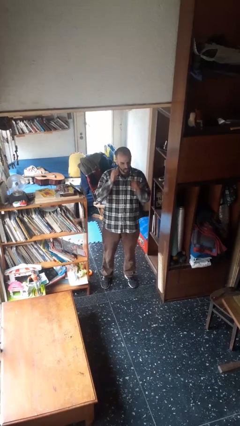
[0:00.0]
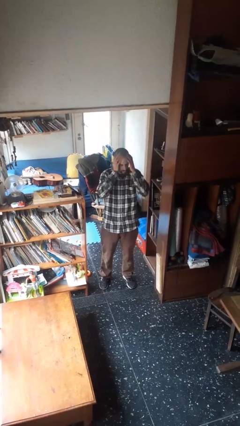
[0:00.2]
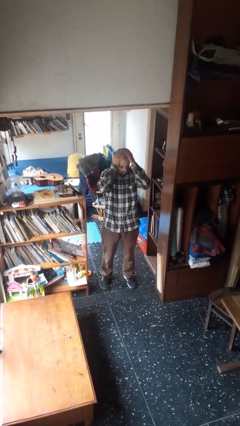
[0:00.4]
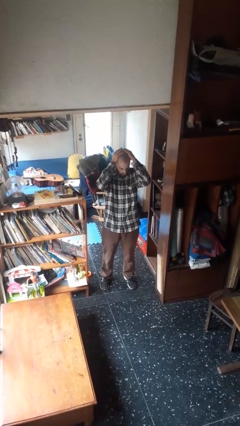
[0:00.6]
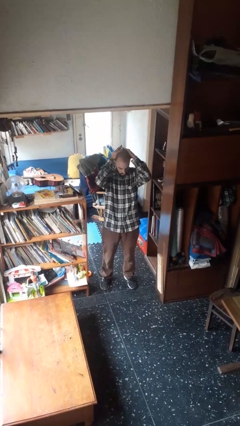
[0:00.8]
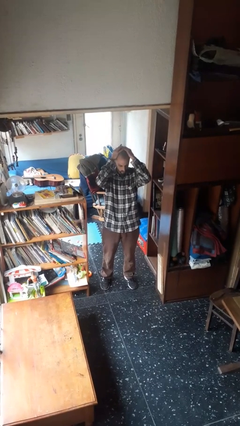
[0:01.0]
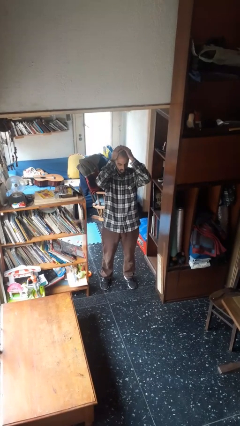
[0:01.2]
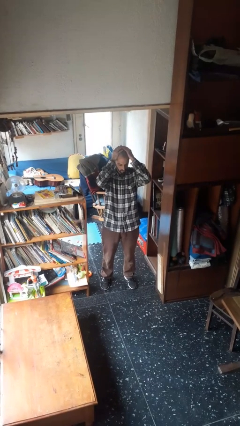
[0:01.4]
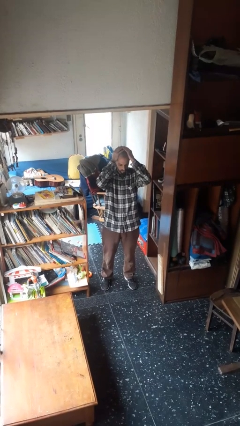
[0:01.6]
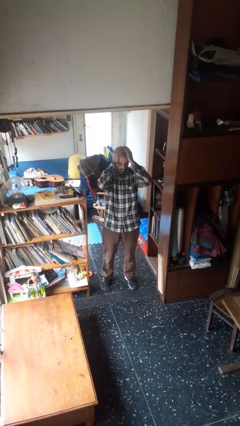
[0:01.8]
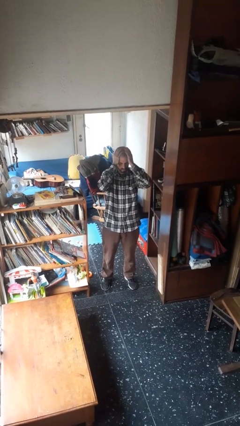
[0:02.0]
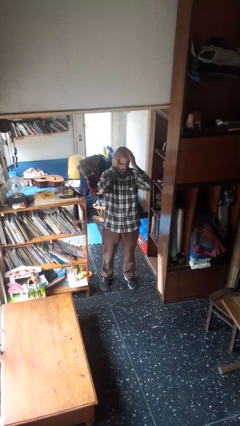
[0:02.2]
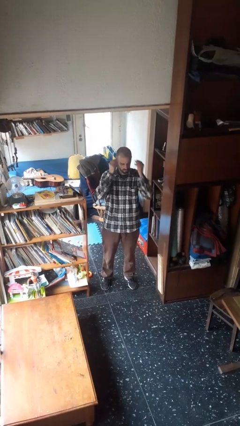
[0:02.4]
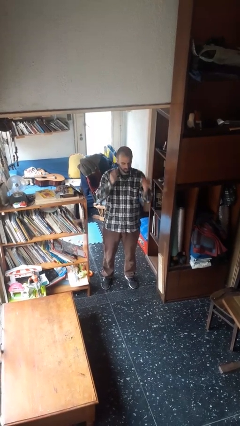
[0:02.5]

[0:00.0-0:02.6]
person pats head

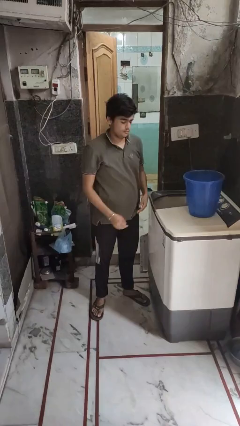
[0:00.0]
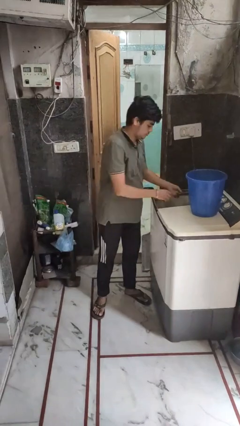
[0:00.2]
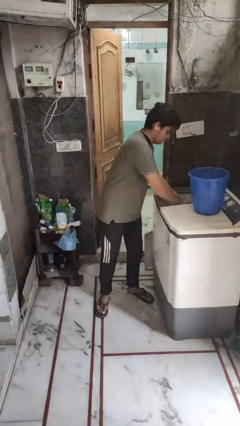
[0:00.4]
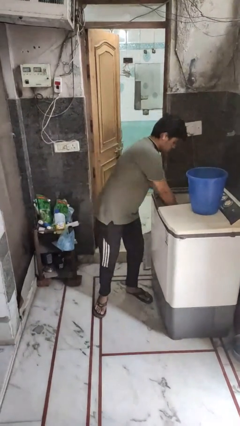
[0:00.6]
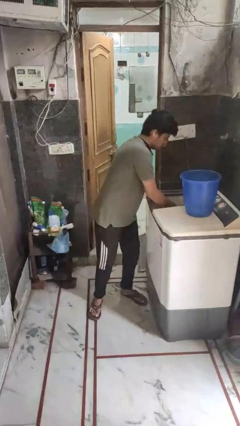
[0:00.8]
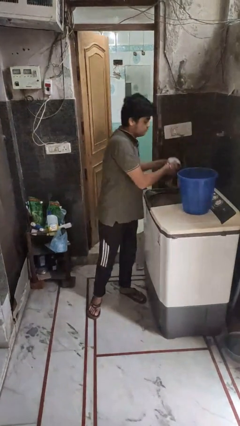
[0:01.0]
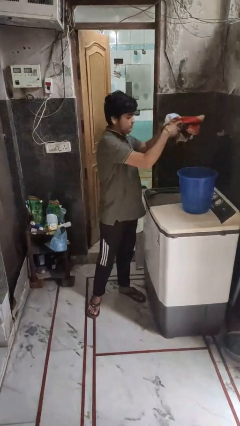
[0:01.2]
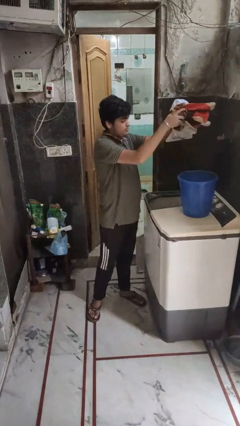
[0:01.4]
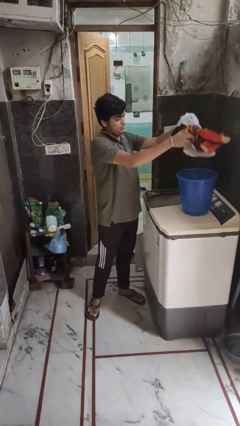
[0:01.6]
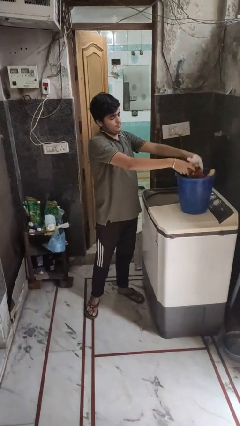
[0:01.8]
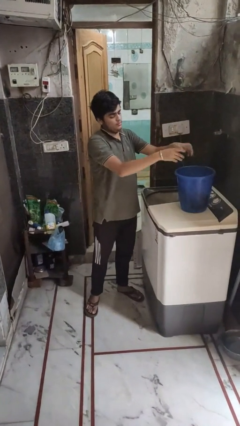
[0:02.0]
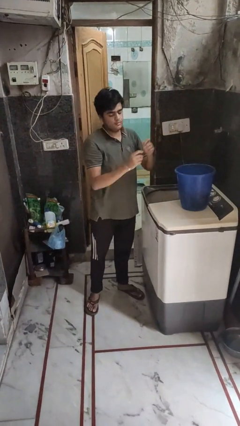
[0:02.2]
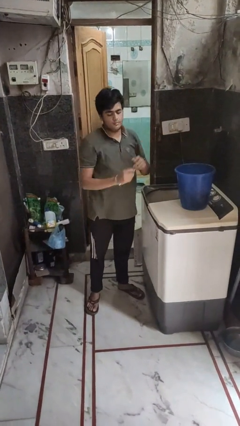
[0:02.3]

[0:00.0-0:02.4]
person unloads clotheswasher

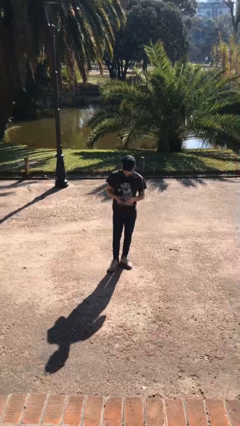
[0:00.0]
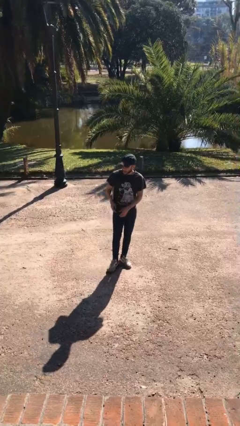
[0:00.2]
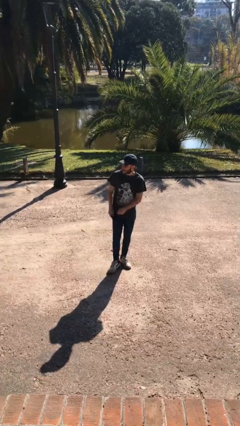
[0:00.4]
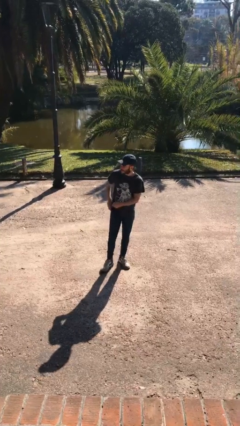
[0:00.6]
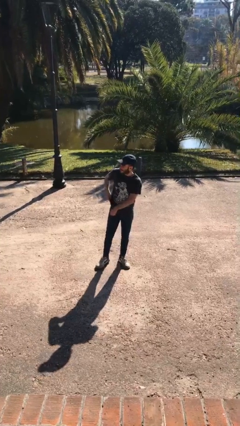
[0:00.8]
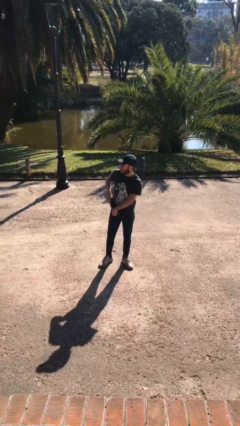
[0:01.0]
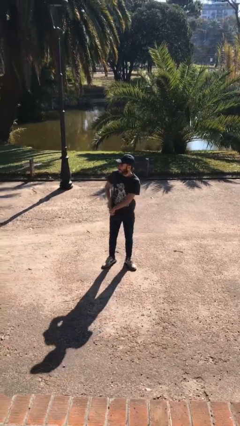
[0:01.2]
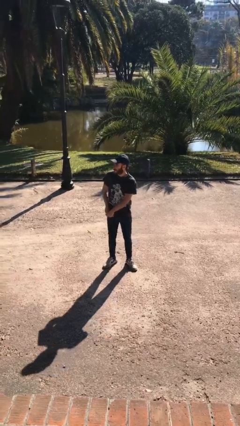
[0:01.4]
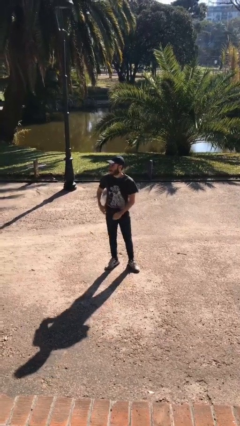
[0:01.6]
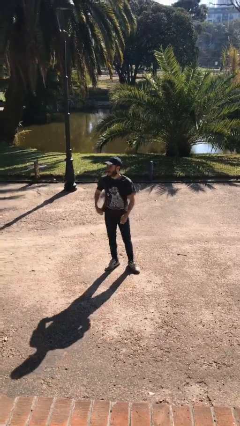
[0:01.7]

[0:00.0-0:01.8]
person puts phone into pocket

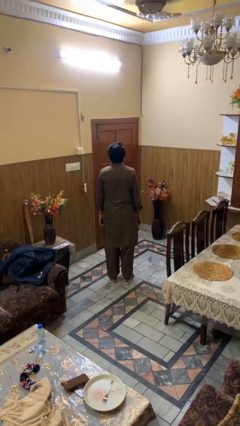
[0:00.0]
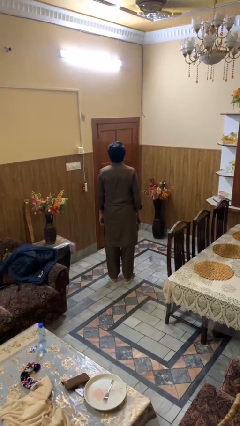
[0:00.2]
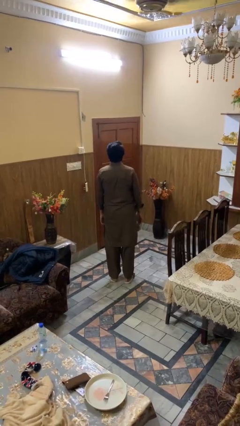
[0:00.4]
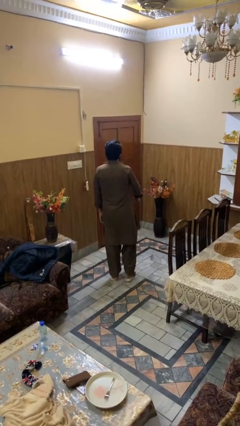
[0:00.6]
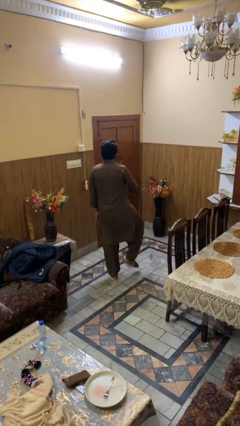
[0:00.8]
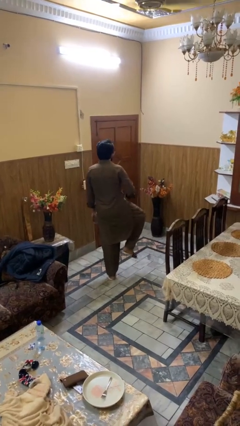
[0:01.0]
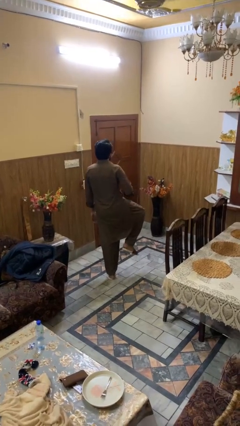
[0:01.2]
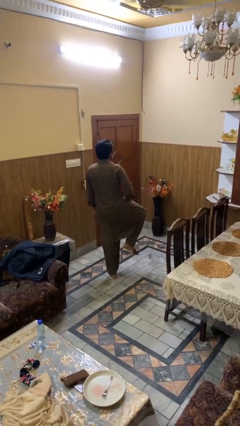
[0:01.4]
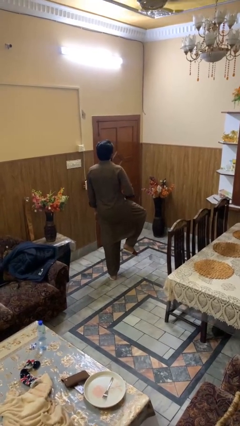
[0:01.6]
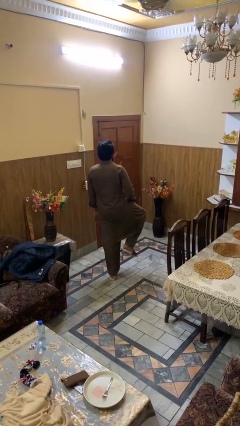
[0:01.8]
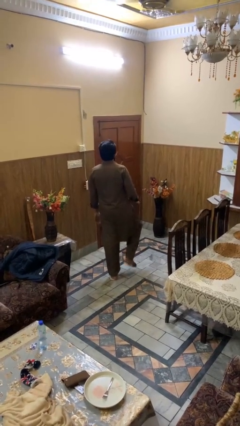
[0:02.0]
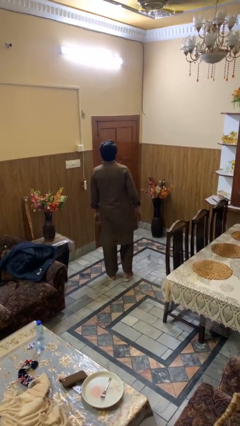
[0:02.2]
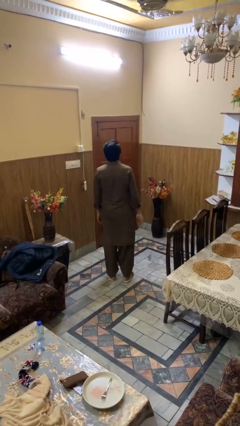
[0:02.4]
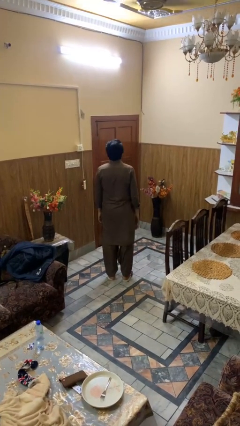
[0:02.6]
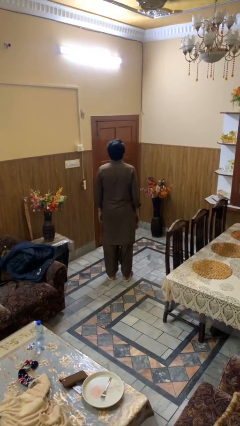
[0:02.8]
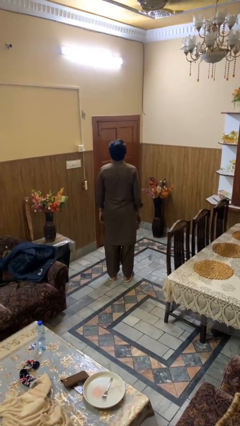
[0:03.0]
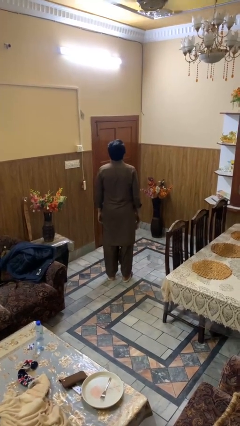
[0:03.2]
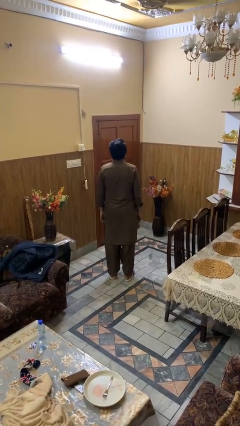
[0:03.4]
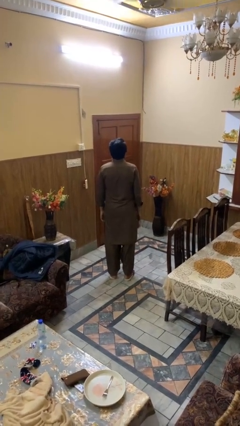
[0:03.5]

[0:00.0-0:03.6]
person slaps hands on thighs

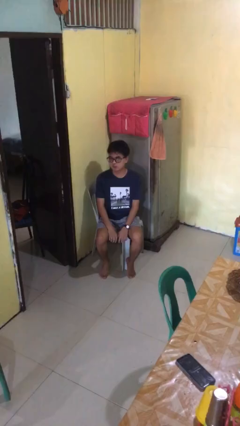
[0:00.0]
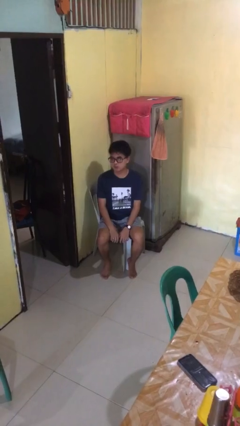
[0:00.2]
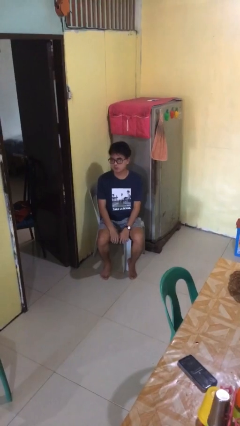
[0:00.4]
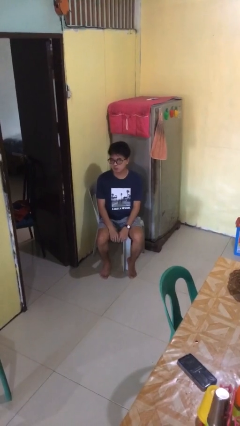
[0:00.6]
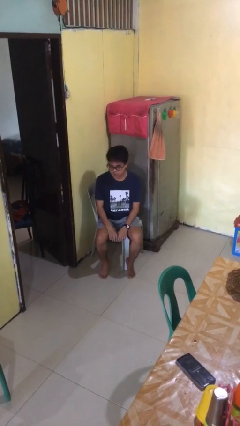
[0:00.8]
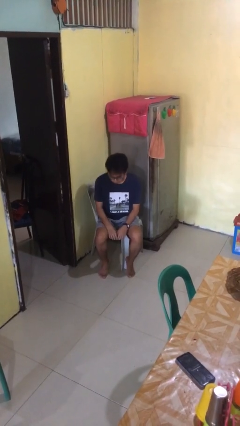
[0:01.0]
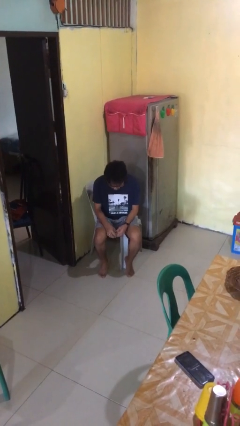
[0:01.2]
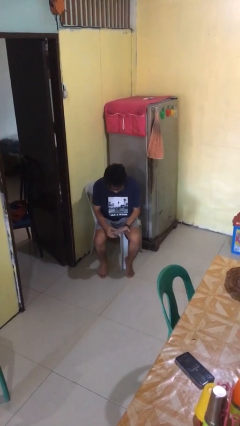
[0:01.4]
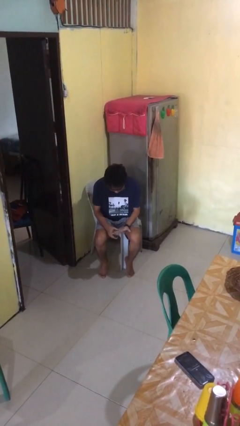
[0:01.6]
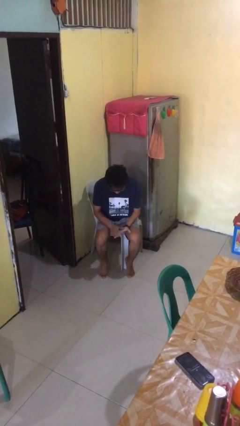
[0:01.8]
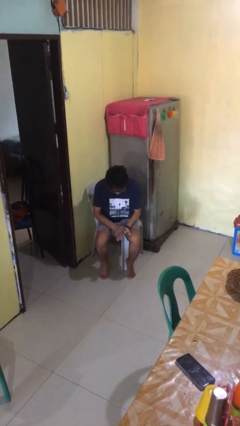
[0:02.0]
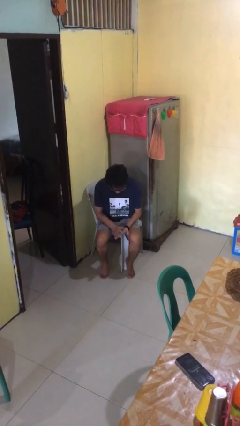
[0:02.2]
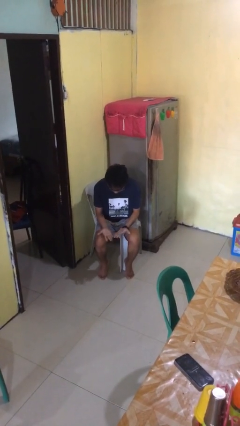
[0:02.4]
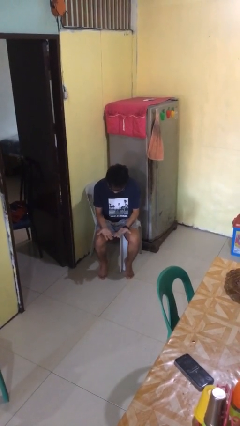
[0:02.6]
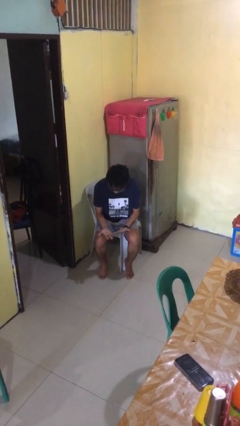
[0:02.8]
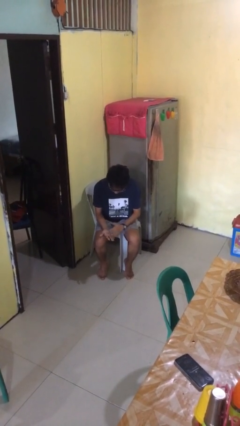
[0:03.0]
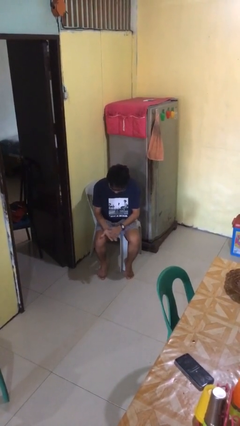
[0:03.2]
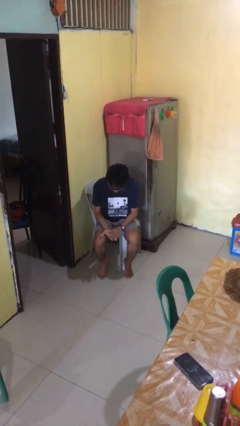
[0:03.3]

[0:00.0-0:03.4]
person looks at hands in lap

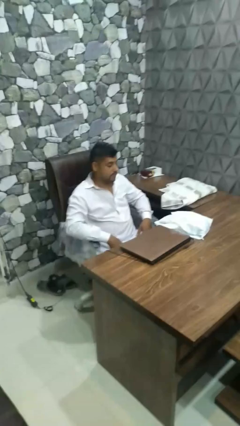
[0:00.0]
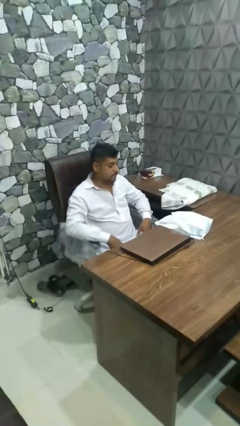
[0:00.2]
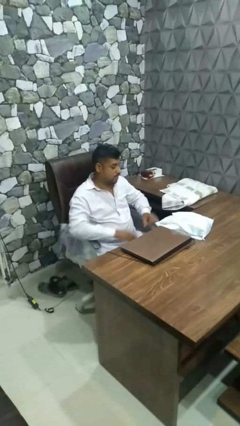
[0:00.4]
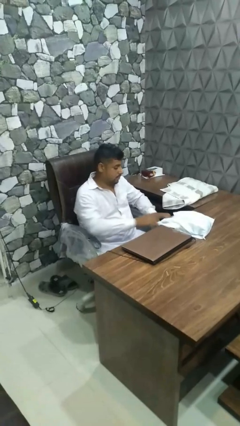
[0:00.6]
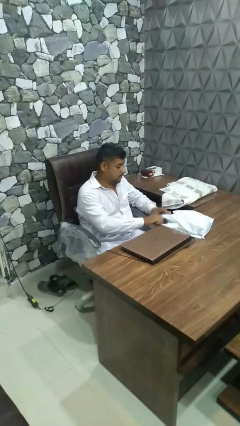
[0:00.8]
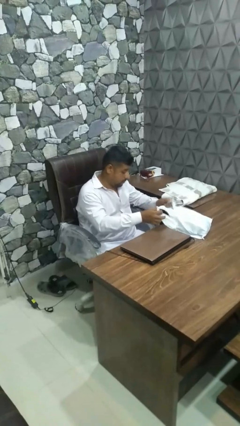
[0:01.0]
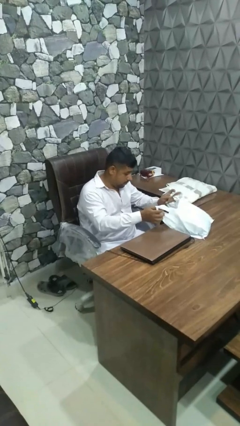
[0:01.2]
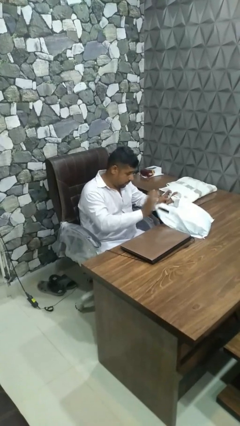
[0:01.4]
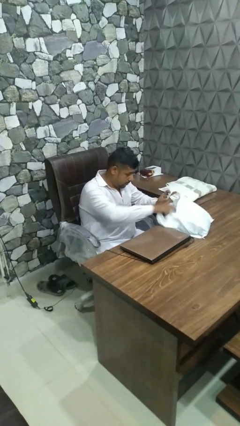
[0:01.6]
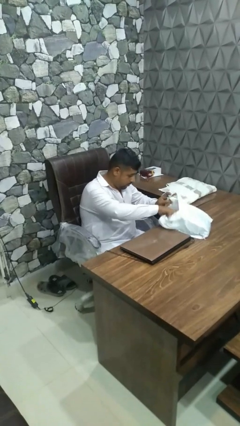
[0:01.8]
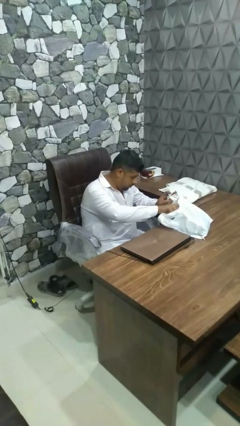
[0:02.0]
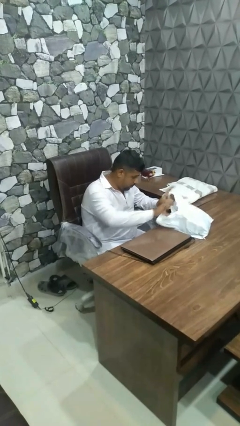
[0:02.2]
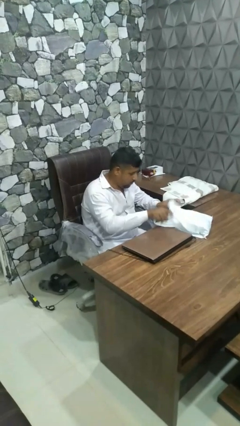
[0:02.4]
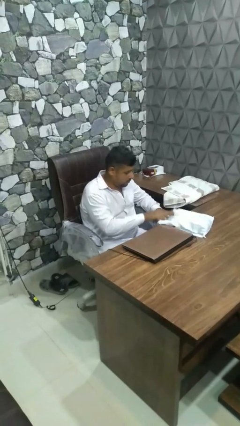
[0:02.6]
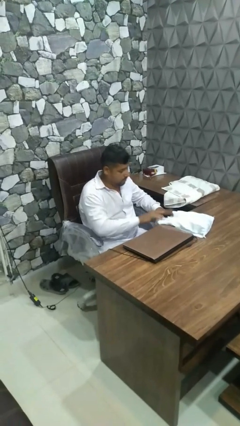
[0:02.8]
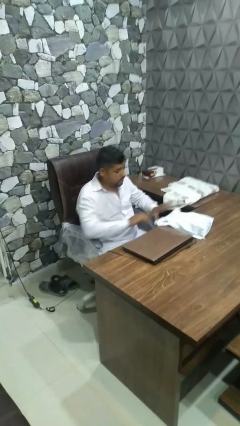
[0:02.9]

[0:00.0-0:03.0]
person searches in bag

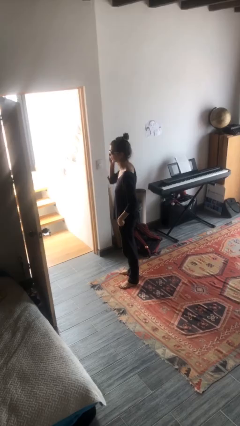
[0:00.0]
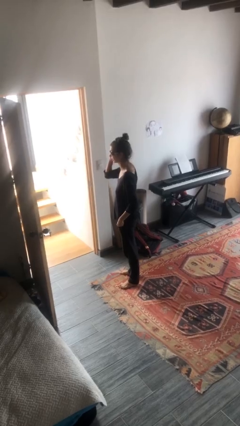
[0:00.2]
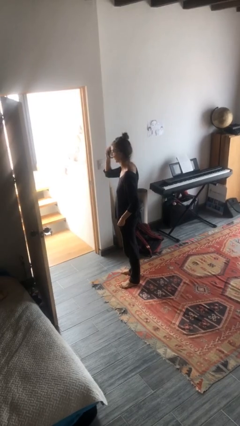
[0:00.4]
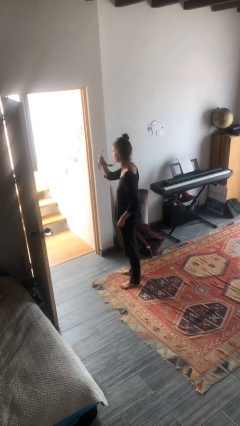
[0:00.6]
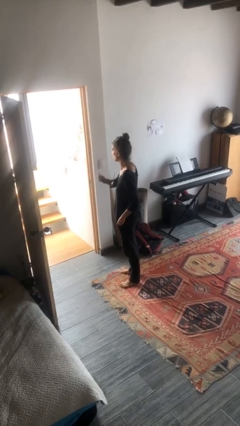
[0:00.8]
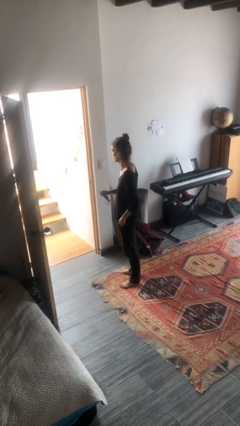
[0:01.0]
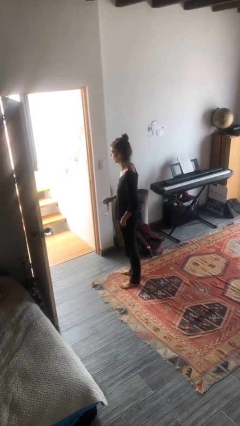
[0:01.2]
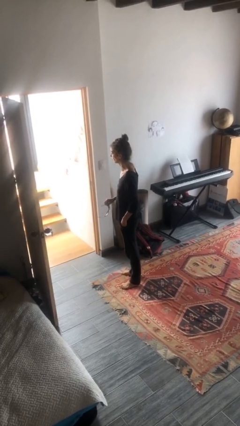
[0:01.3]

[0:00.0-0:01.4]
person takes off sunglasses
